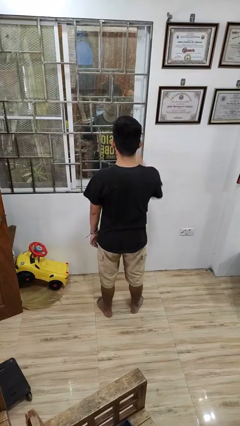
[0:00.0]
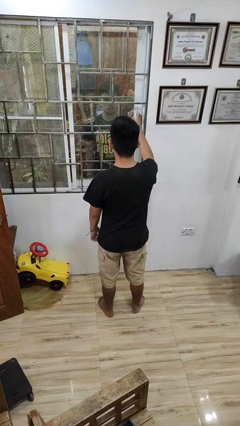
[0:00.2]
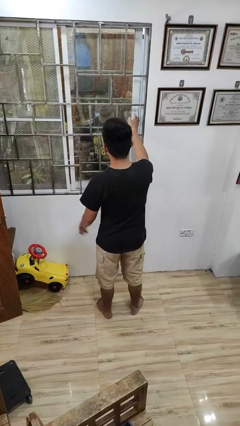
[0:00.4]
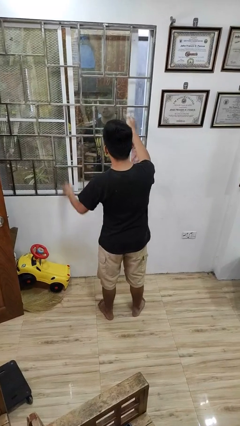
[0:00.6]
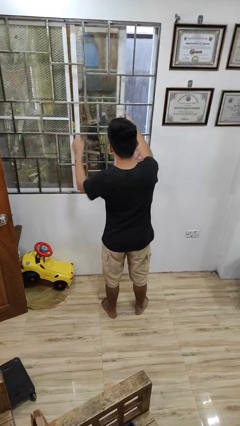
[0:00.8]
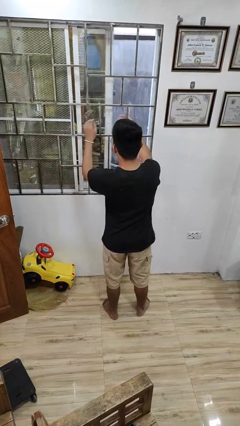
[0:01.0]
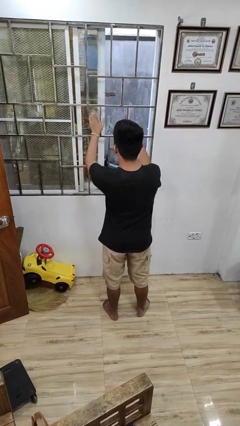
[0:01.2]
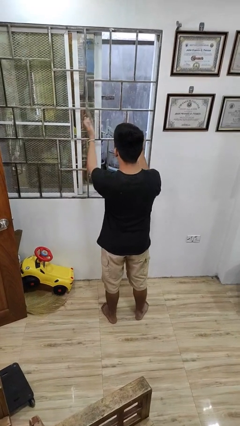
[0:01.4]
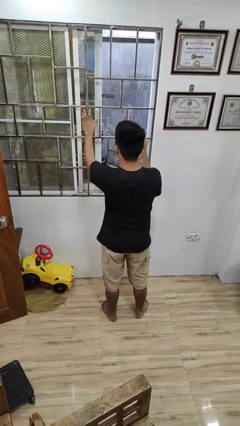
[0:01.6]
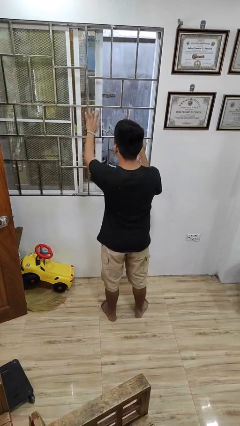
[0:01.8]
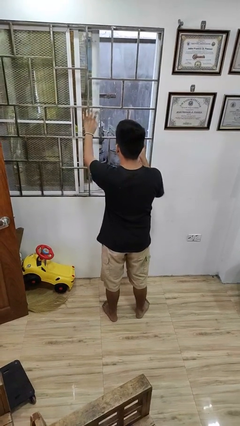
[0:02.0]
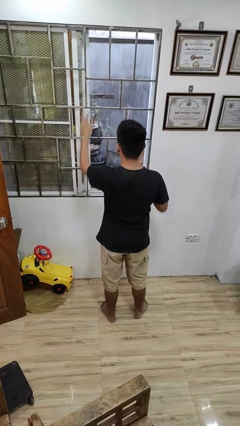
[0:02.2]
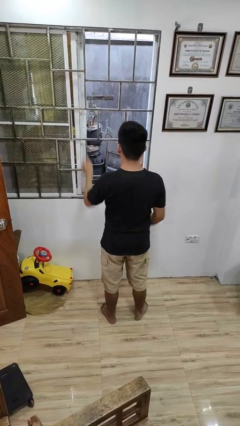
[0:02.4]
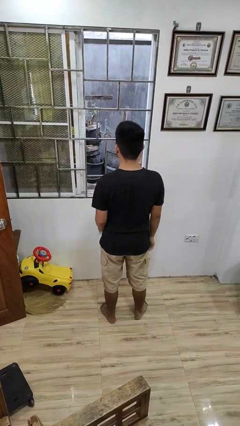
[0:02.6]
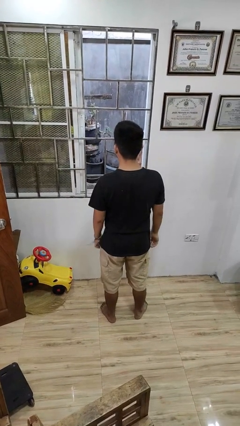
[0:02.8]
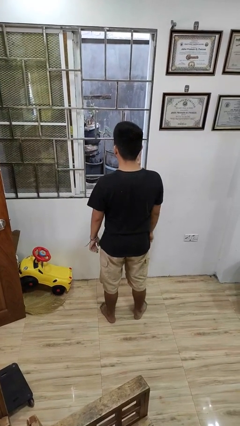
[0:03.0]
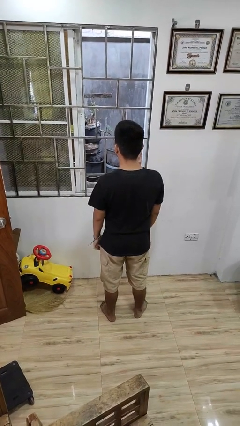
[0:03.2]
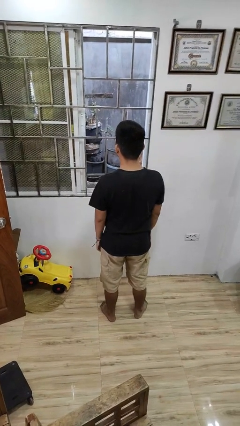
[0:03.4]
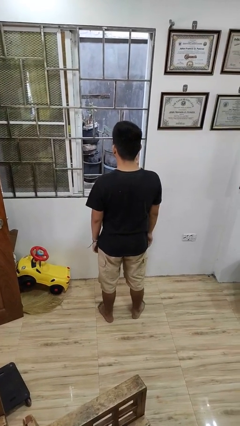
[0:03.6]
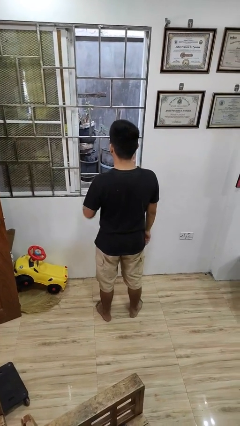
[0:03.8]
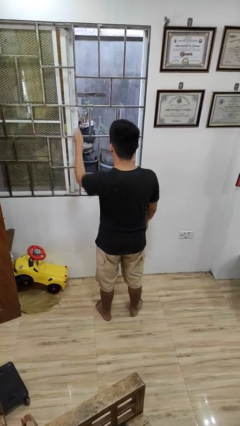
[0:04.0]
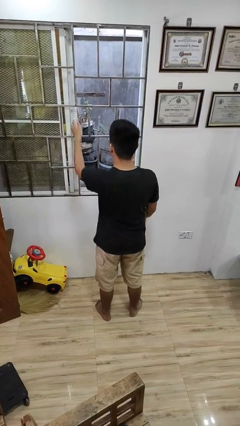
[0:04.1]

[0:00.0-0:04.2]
person opens home window

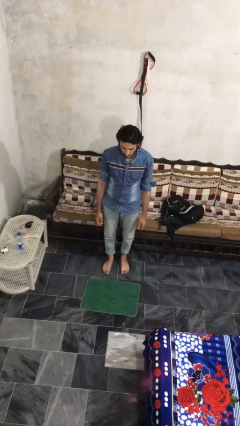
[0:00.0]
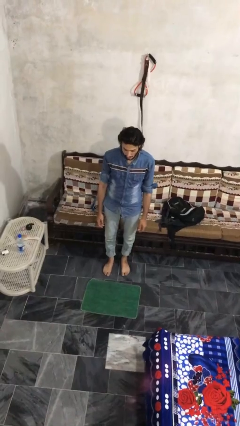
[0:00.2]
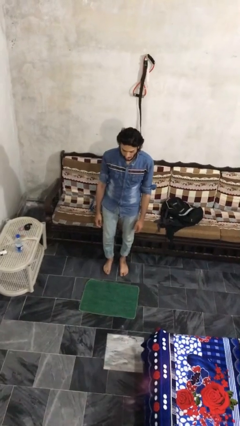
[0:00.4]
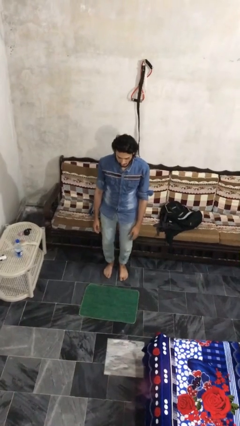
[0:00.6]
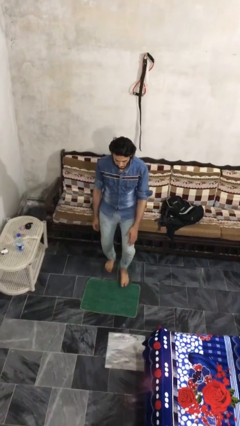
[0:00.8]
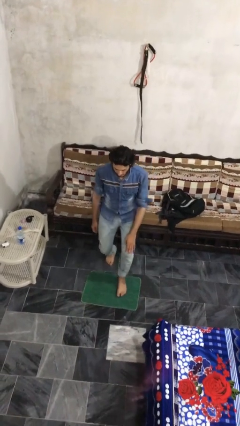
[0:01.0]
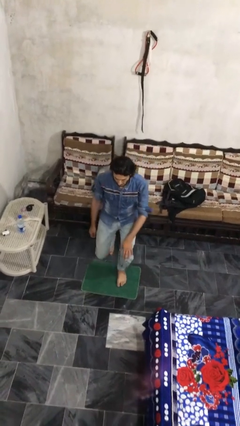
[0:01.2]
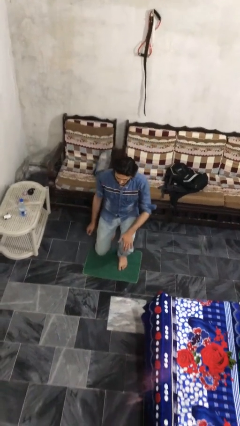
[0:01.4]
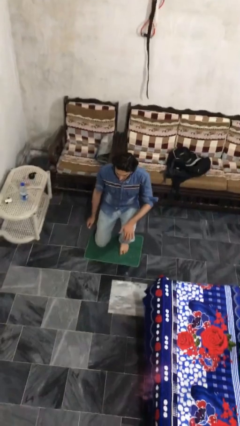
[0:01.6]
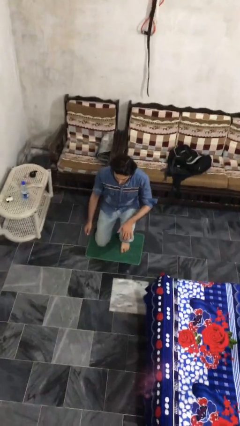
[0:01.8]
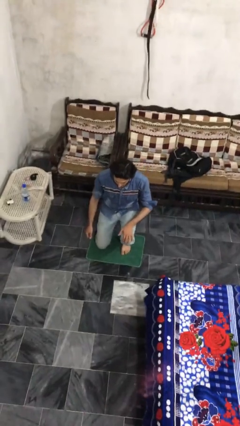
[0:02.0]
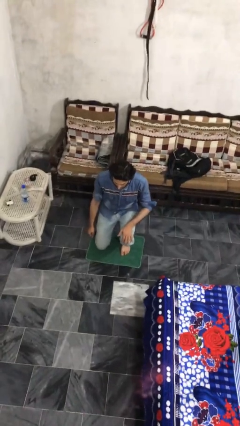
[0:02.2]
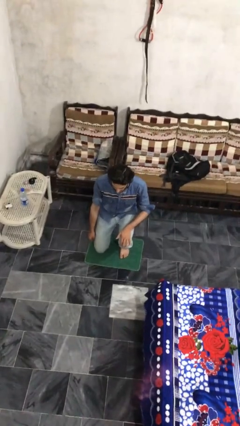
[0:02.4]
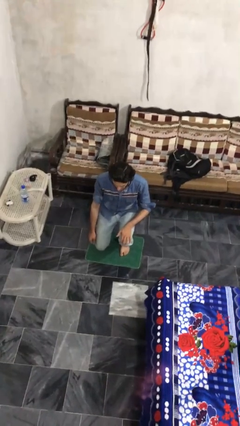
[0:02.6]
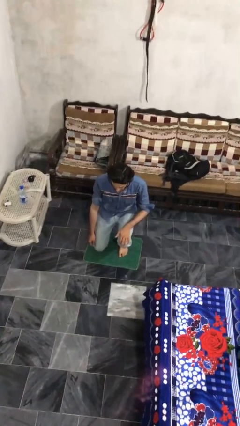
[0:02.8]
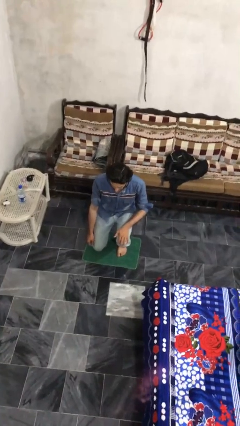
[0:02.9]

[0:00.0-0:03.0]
person kneels

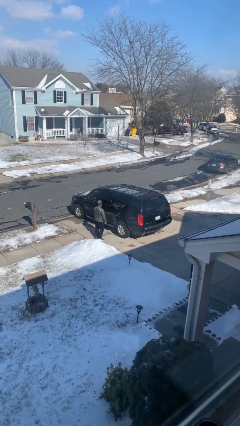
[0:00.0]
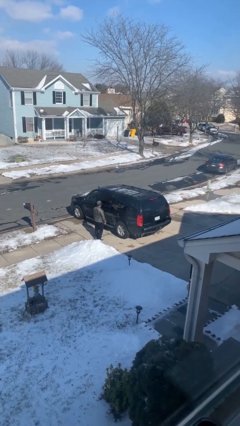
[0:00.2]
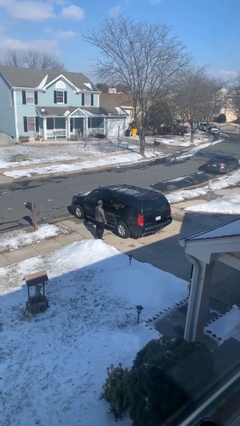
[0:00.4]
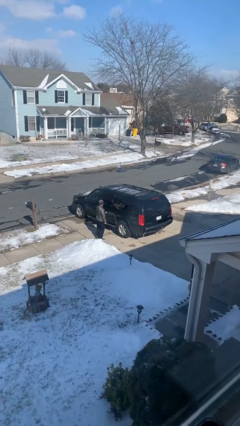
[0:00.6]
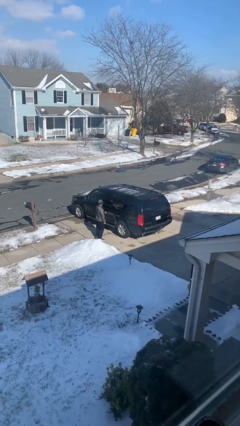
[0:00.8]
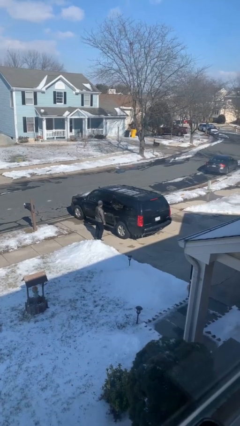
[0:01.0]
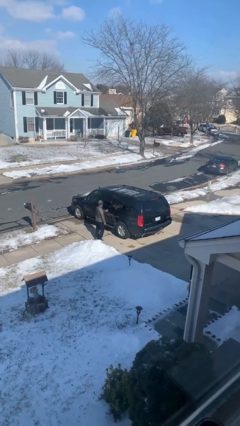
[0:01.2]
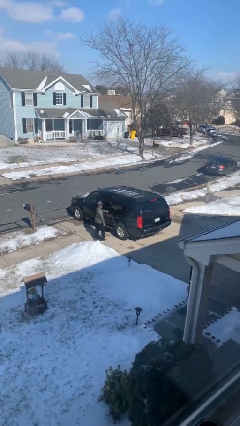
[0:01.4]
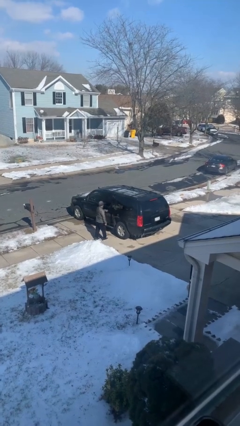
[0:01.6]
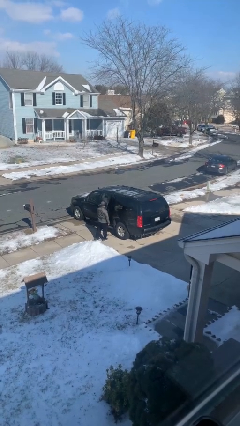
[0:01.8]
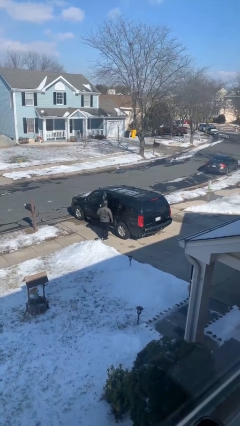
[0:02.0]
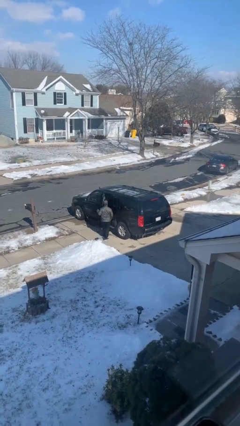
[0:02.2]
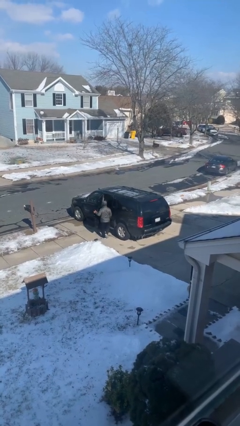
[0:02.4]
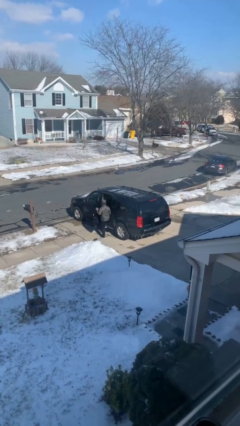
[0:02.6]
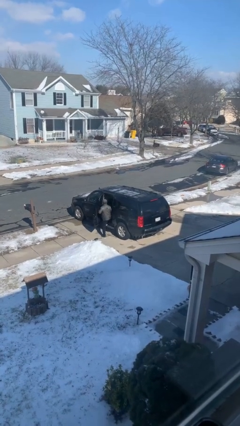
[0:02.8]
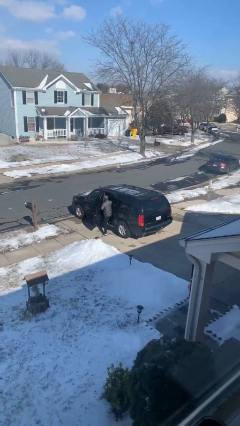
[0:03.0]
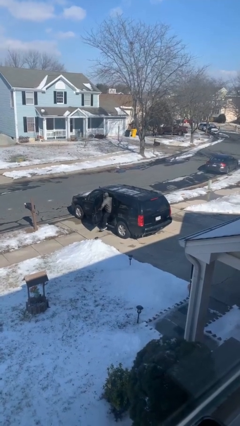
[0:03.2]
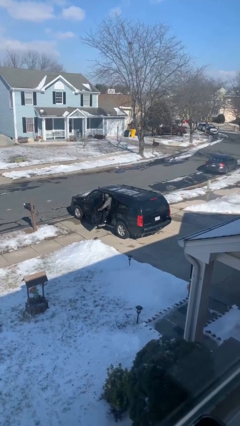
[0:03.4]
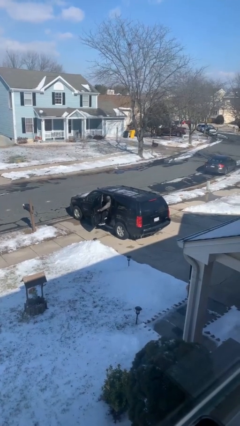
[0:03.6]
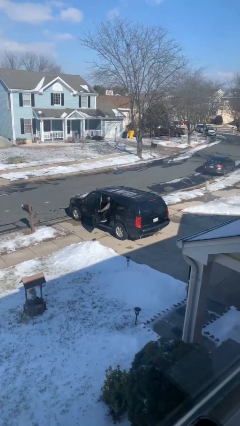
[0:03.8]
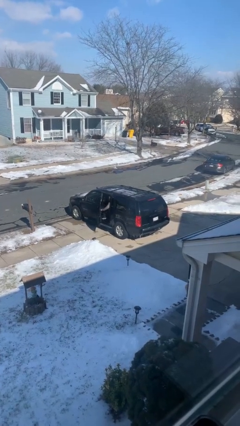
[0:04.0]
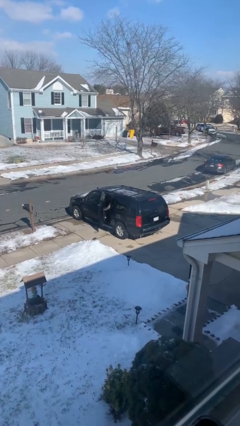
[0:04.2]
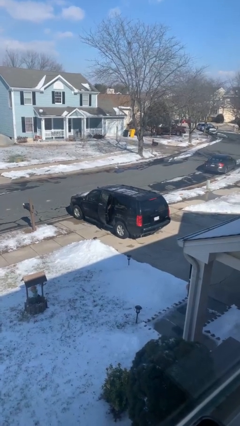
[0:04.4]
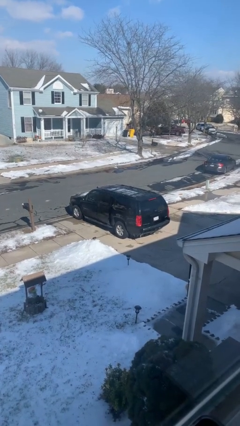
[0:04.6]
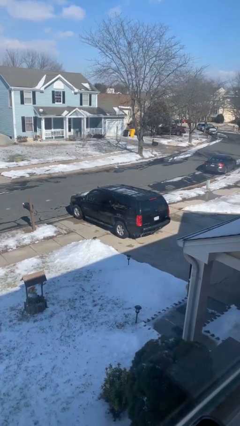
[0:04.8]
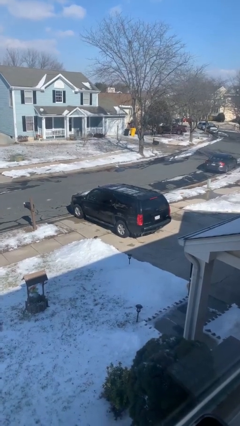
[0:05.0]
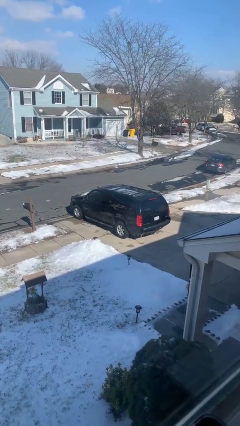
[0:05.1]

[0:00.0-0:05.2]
car picks up person

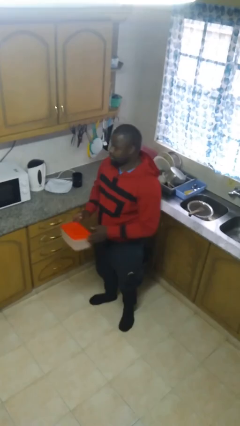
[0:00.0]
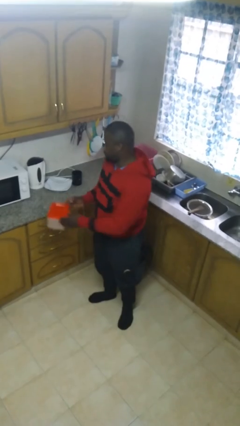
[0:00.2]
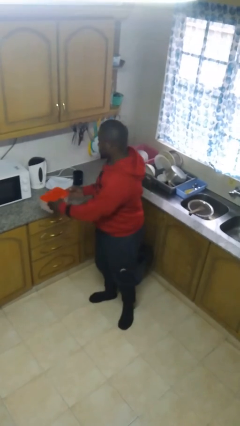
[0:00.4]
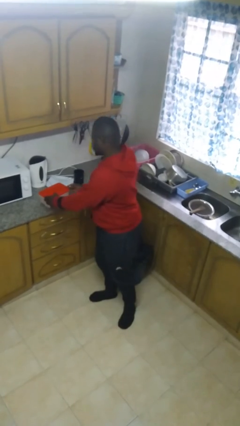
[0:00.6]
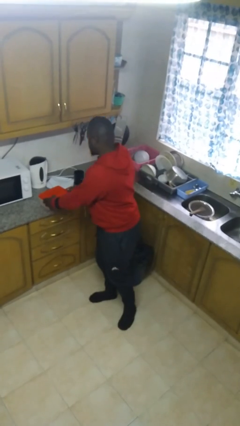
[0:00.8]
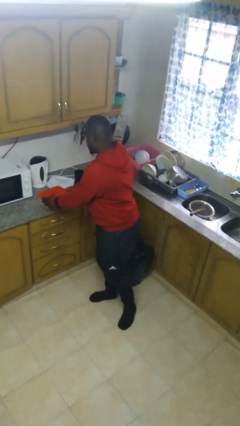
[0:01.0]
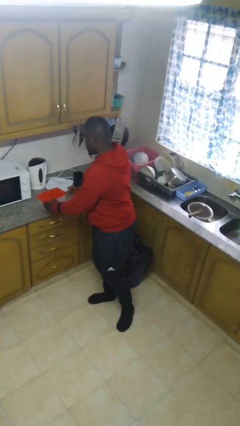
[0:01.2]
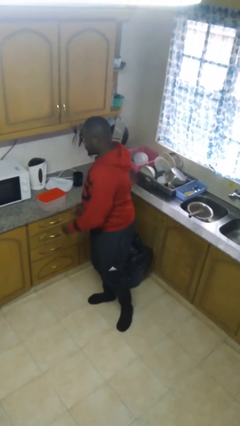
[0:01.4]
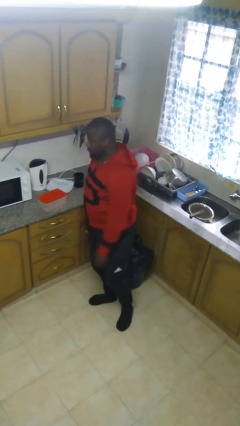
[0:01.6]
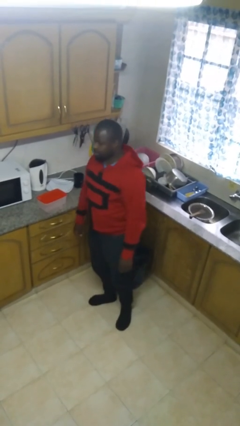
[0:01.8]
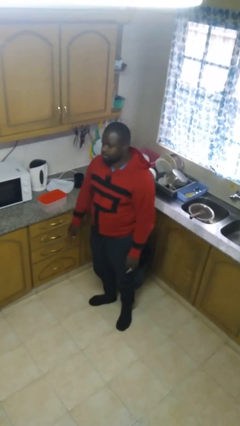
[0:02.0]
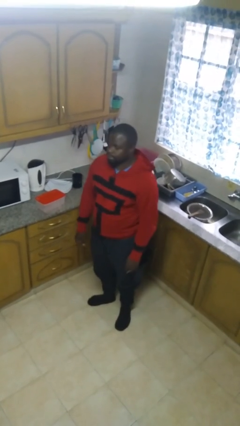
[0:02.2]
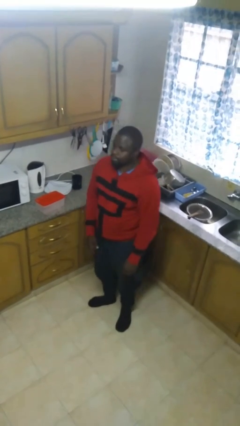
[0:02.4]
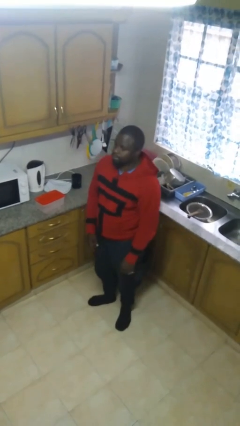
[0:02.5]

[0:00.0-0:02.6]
person puts down object on countertop

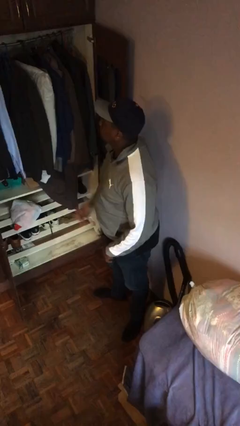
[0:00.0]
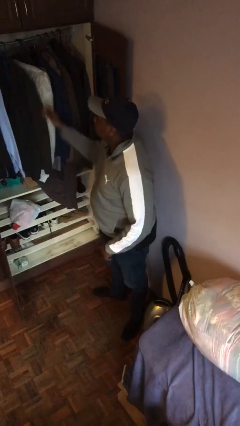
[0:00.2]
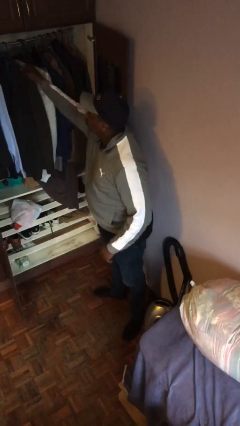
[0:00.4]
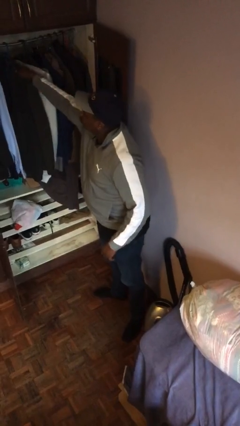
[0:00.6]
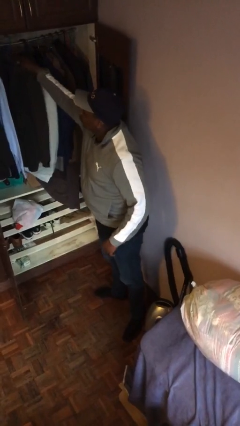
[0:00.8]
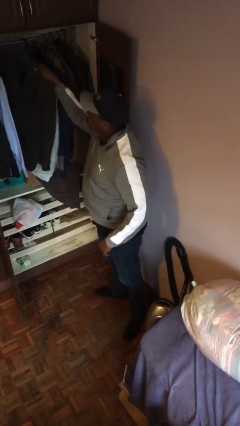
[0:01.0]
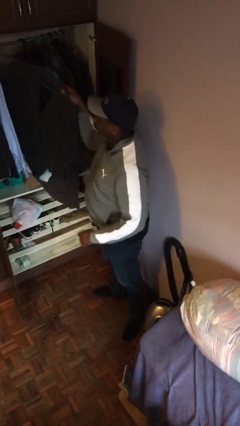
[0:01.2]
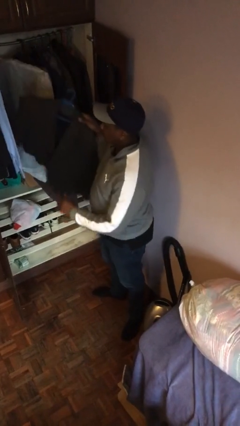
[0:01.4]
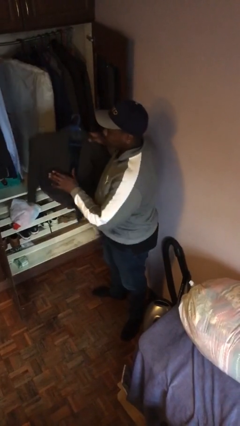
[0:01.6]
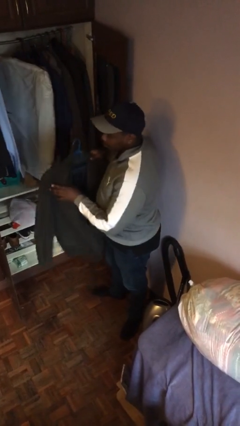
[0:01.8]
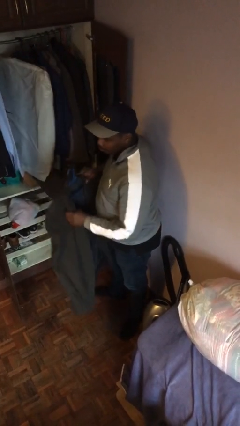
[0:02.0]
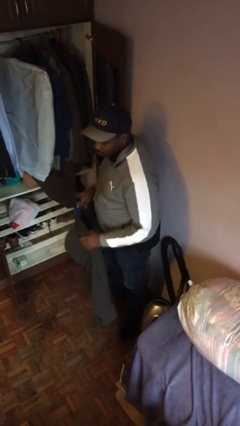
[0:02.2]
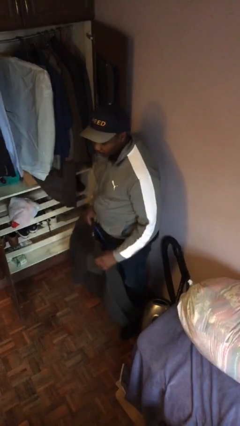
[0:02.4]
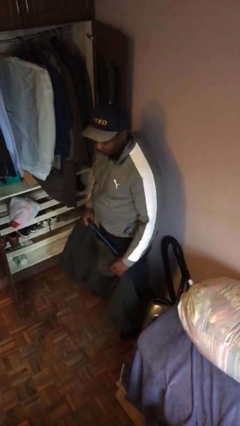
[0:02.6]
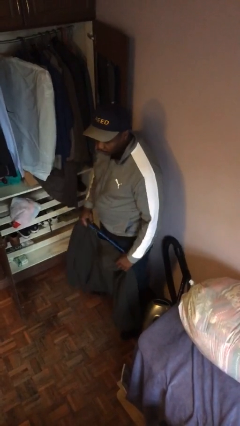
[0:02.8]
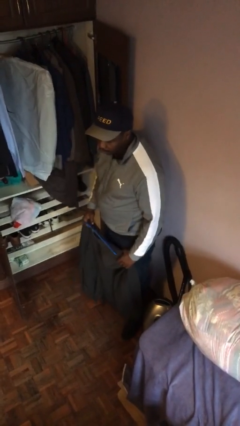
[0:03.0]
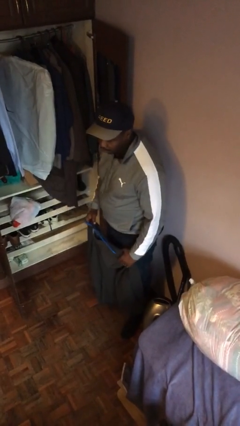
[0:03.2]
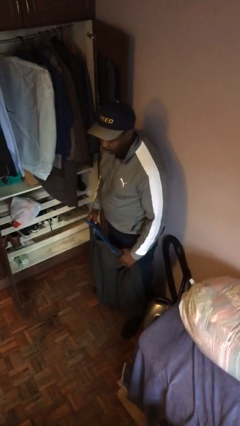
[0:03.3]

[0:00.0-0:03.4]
person takes clothes from closet
